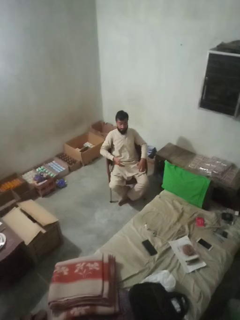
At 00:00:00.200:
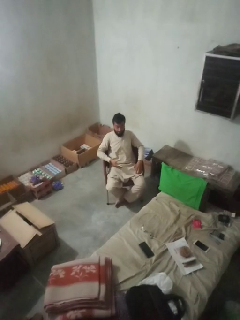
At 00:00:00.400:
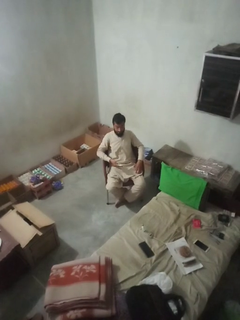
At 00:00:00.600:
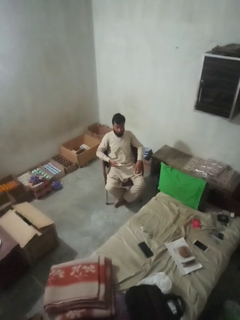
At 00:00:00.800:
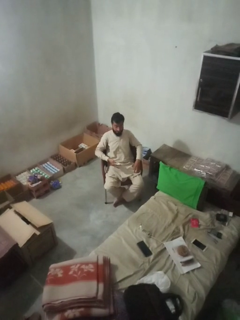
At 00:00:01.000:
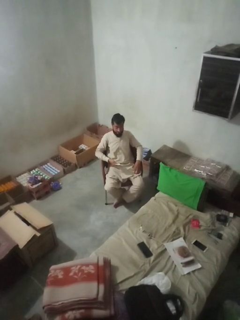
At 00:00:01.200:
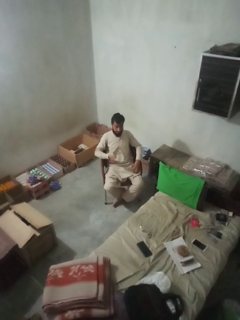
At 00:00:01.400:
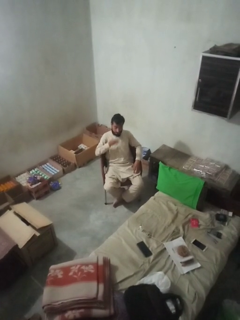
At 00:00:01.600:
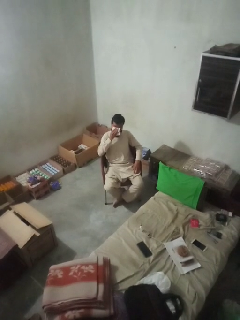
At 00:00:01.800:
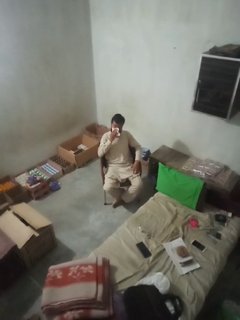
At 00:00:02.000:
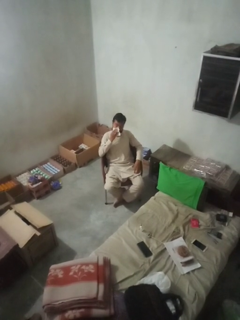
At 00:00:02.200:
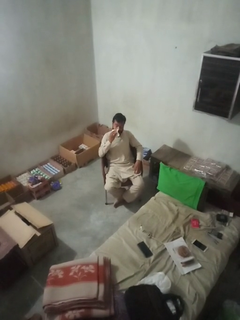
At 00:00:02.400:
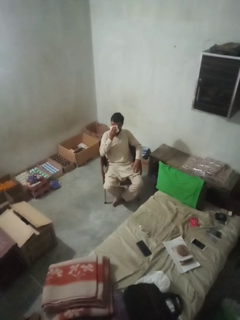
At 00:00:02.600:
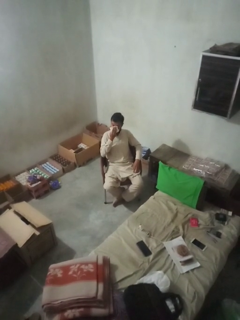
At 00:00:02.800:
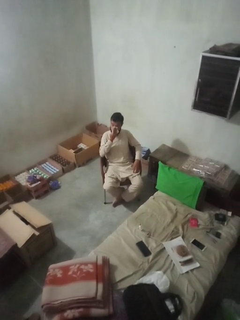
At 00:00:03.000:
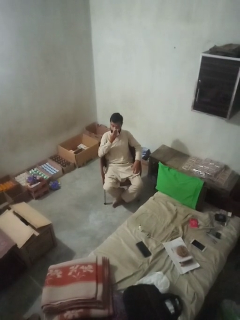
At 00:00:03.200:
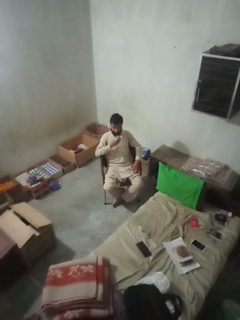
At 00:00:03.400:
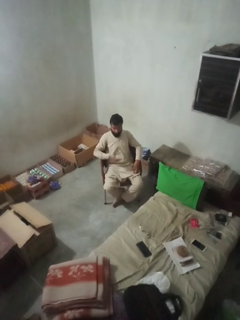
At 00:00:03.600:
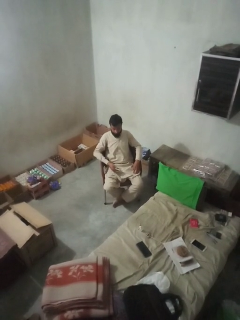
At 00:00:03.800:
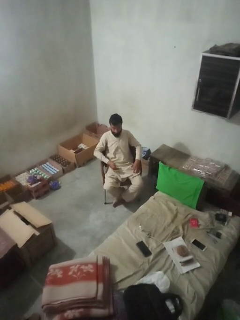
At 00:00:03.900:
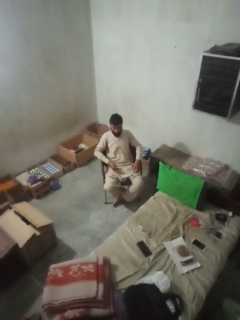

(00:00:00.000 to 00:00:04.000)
person wipes mouth with napkin

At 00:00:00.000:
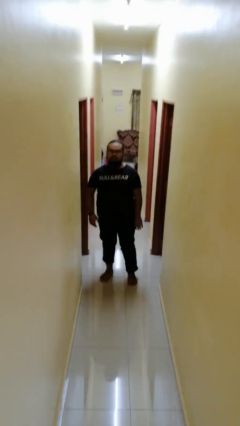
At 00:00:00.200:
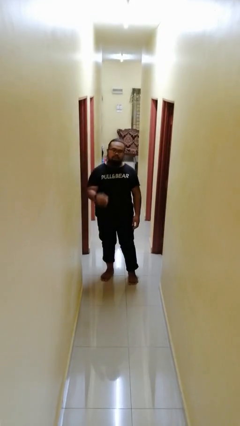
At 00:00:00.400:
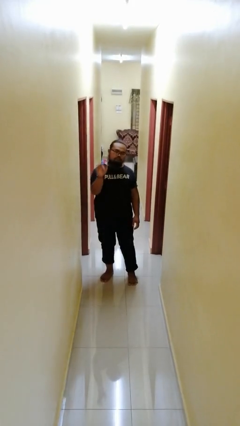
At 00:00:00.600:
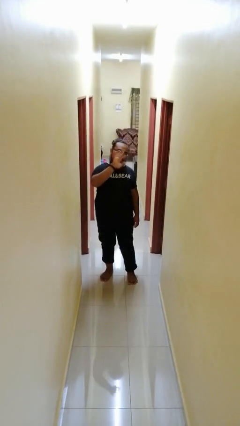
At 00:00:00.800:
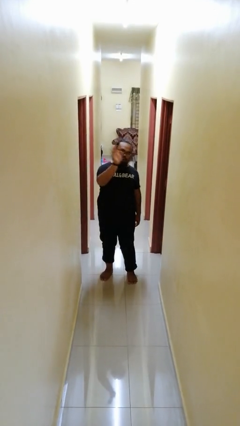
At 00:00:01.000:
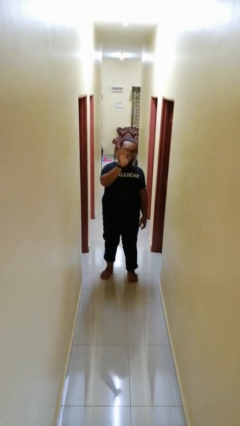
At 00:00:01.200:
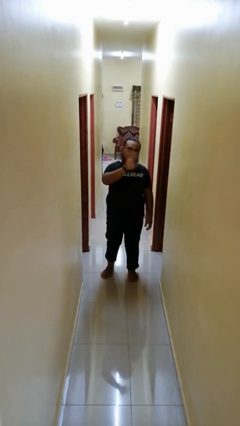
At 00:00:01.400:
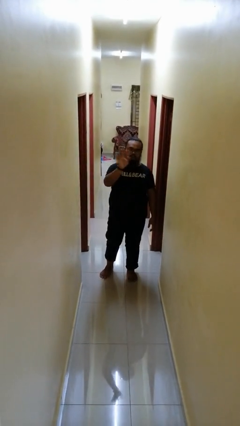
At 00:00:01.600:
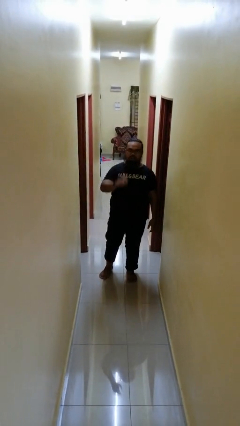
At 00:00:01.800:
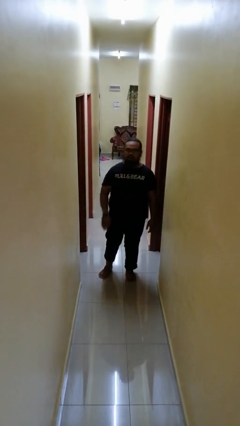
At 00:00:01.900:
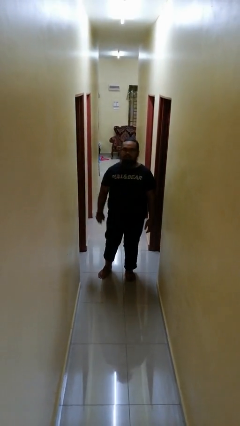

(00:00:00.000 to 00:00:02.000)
person waves at person

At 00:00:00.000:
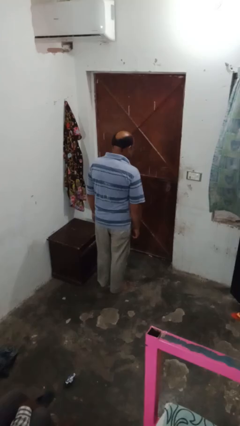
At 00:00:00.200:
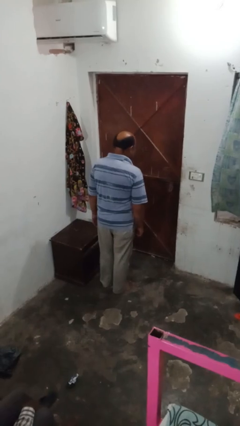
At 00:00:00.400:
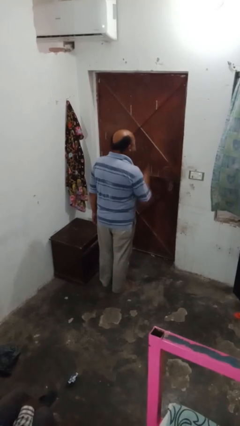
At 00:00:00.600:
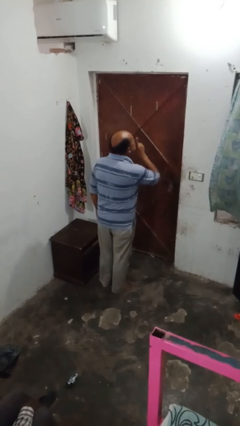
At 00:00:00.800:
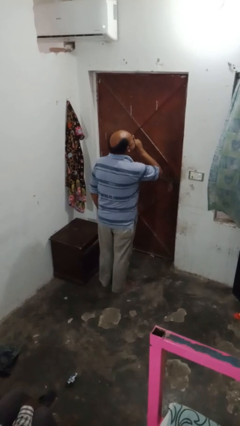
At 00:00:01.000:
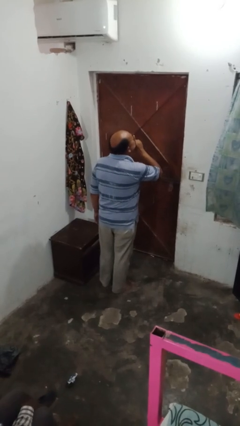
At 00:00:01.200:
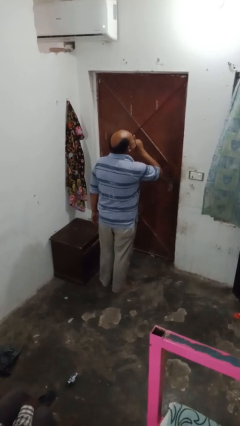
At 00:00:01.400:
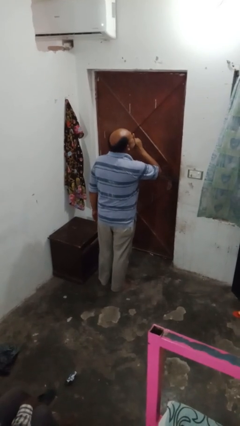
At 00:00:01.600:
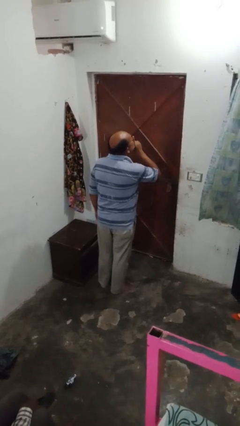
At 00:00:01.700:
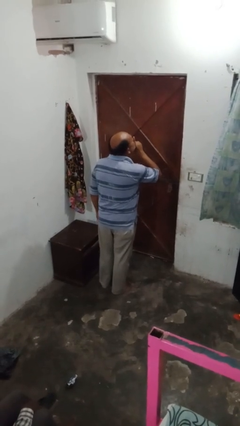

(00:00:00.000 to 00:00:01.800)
person gestures be quiet

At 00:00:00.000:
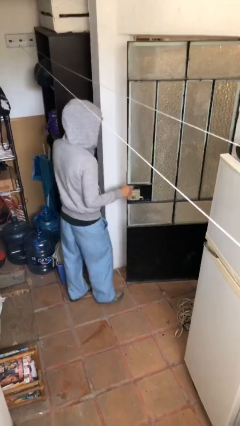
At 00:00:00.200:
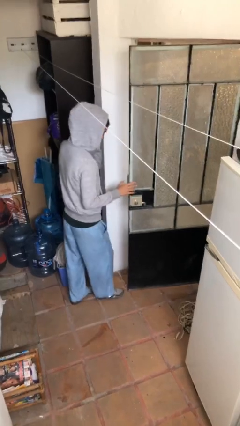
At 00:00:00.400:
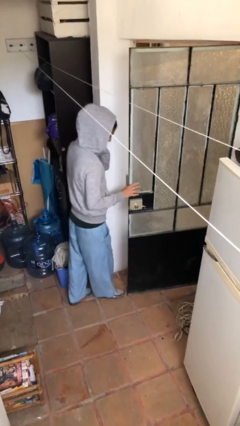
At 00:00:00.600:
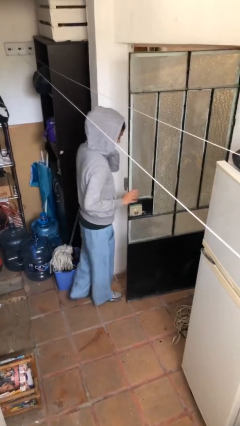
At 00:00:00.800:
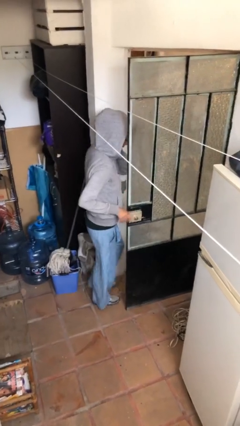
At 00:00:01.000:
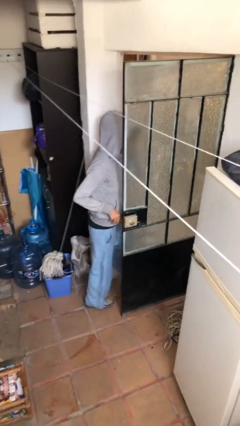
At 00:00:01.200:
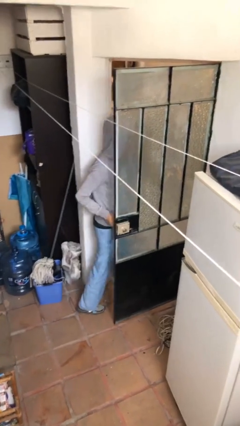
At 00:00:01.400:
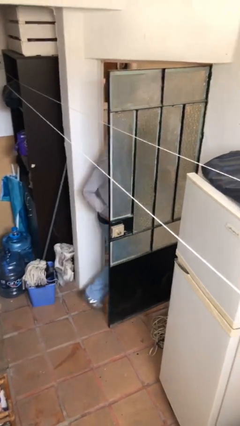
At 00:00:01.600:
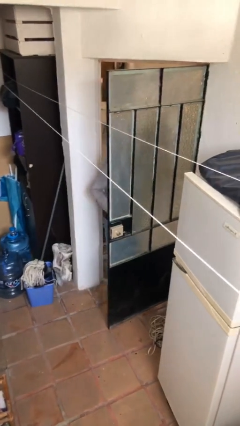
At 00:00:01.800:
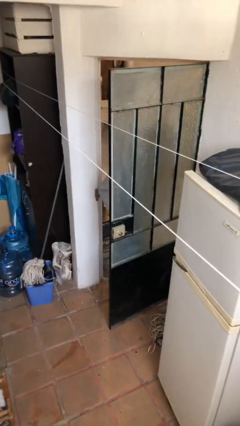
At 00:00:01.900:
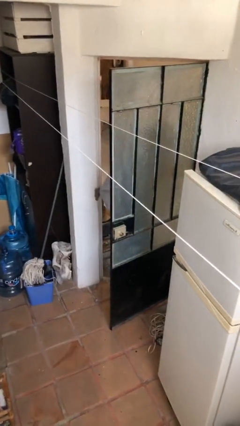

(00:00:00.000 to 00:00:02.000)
person exits scene through structure

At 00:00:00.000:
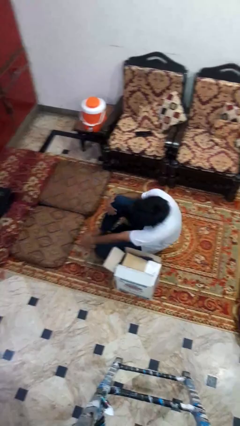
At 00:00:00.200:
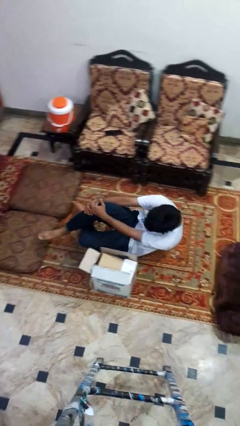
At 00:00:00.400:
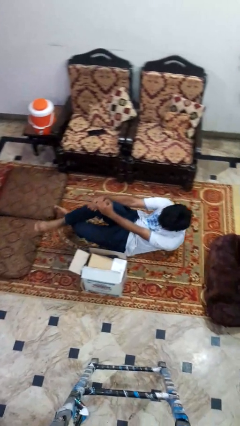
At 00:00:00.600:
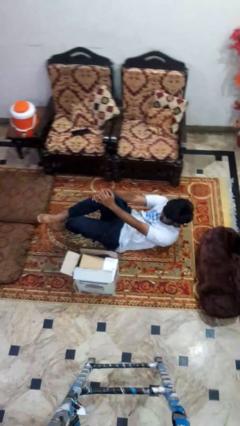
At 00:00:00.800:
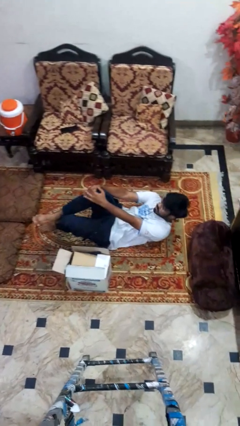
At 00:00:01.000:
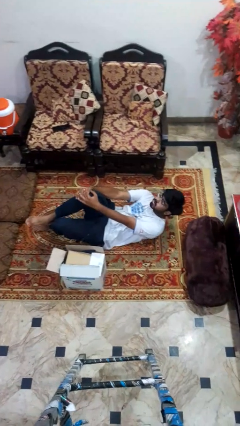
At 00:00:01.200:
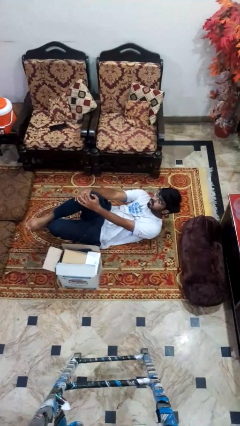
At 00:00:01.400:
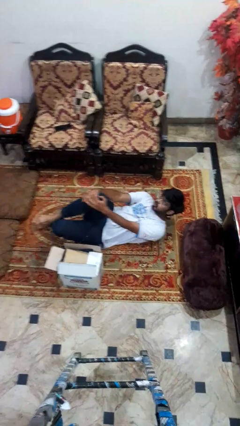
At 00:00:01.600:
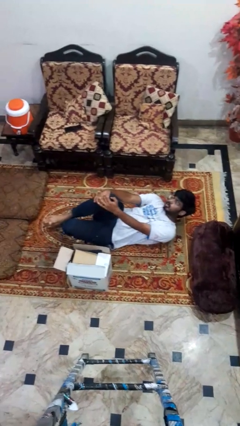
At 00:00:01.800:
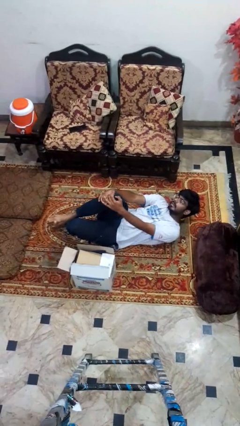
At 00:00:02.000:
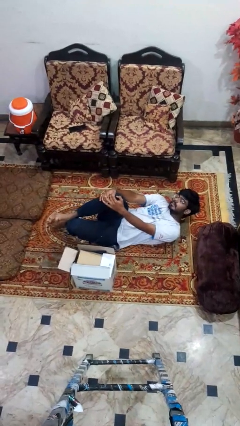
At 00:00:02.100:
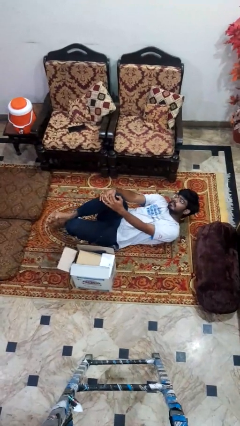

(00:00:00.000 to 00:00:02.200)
person lies down on floor

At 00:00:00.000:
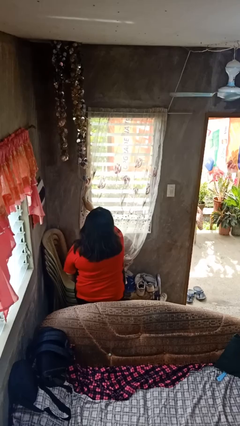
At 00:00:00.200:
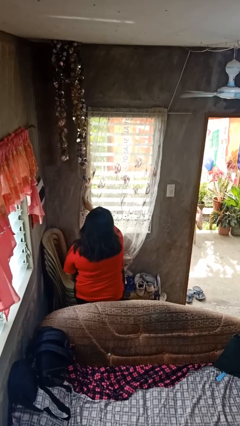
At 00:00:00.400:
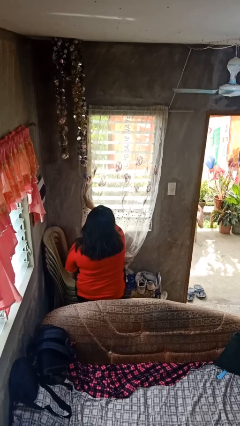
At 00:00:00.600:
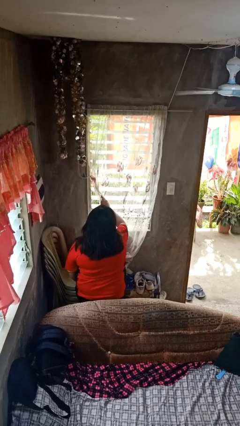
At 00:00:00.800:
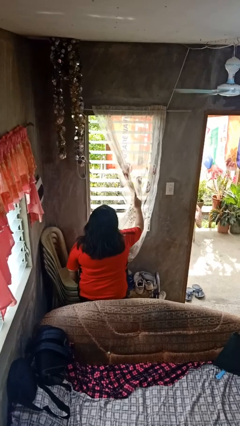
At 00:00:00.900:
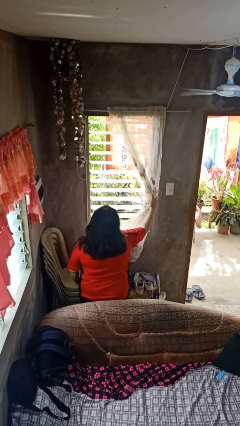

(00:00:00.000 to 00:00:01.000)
person opens curtains

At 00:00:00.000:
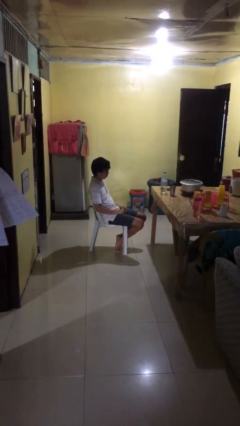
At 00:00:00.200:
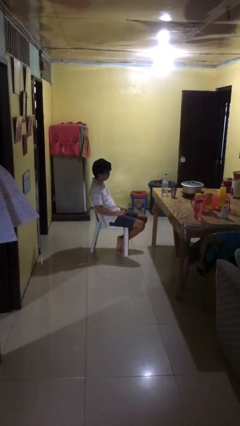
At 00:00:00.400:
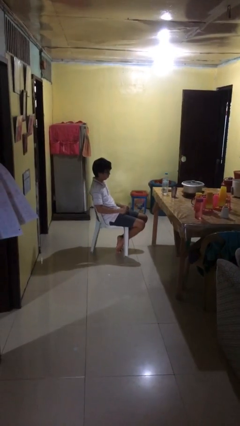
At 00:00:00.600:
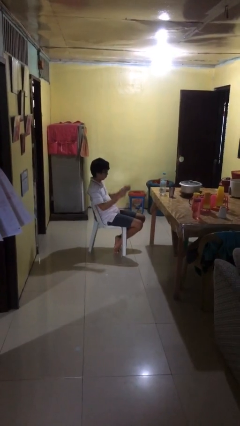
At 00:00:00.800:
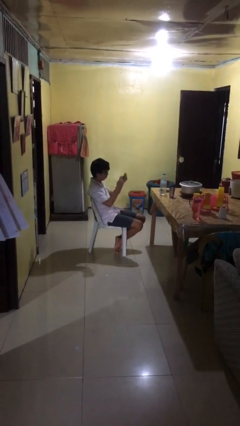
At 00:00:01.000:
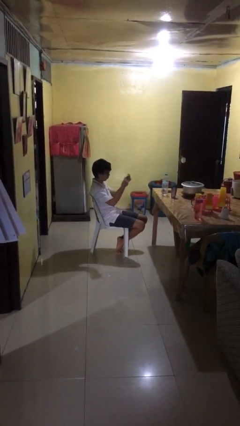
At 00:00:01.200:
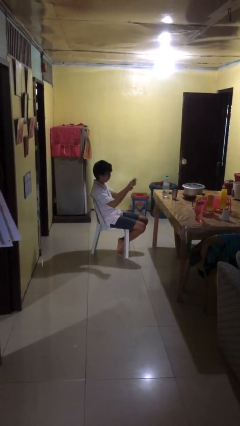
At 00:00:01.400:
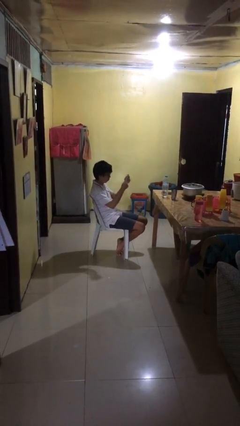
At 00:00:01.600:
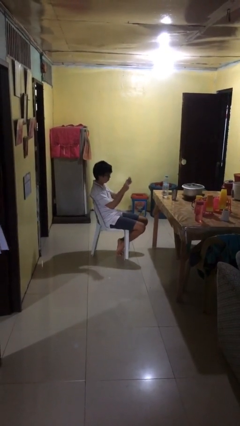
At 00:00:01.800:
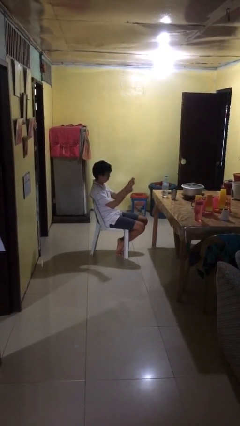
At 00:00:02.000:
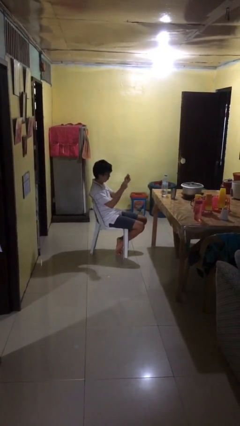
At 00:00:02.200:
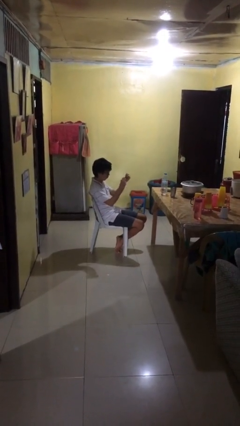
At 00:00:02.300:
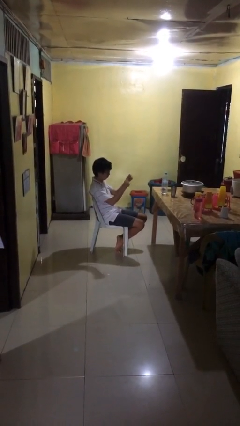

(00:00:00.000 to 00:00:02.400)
person snaps fingers

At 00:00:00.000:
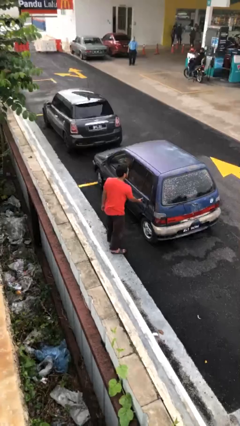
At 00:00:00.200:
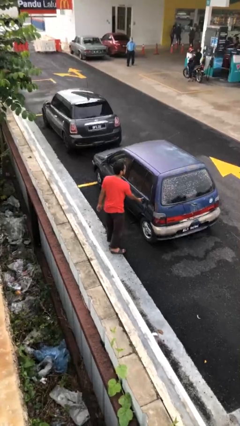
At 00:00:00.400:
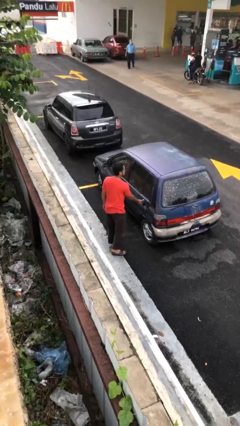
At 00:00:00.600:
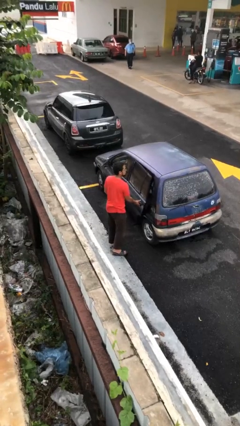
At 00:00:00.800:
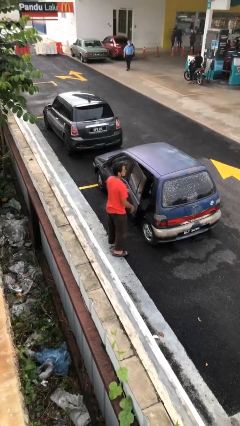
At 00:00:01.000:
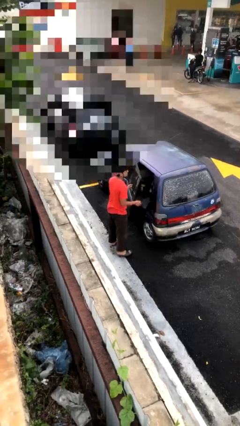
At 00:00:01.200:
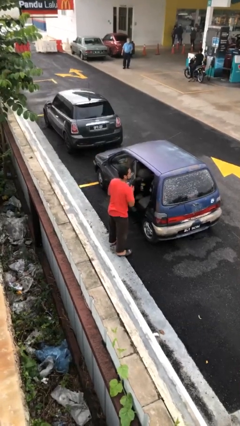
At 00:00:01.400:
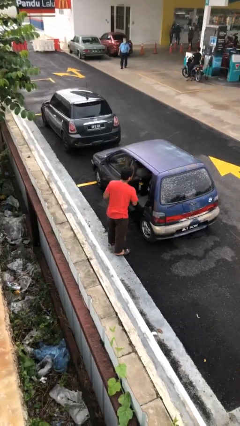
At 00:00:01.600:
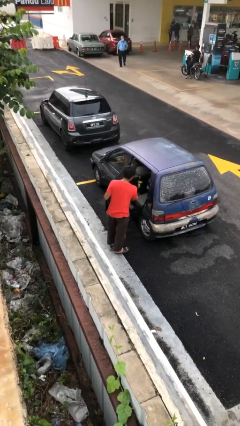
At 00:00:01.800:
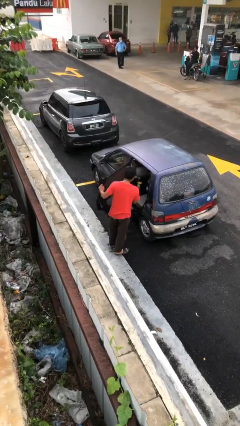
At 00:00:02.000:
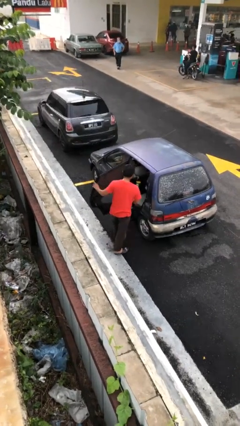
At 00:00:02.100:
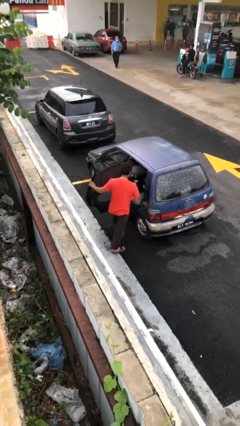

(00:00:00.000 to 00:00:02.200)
person opens car door
